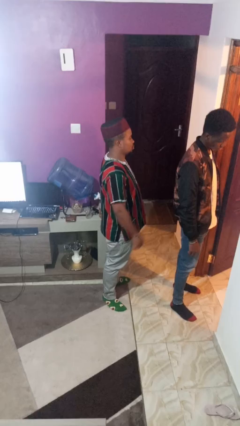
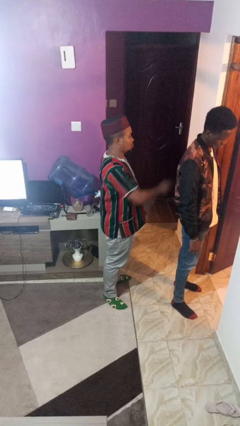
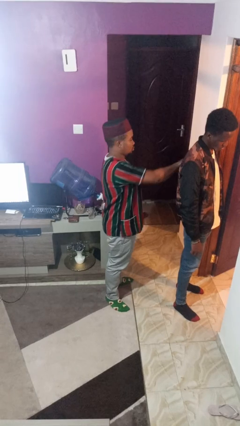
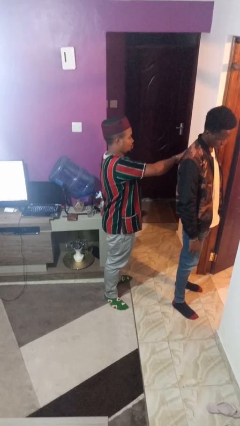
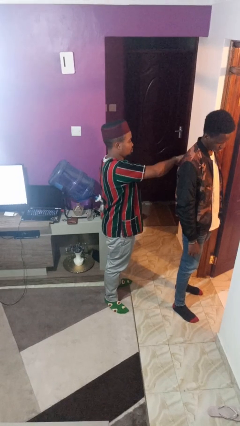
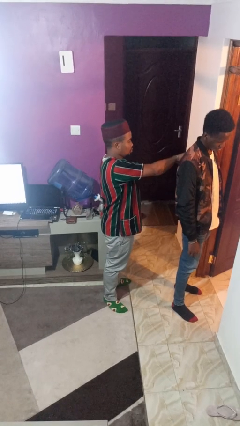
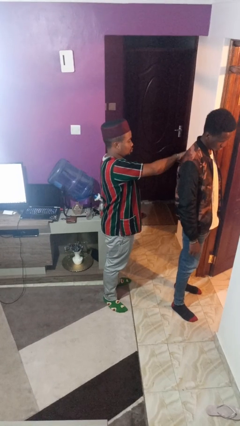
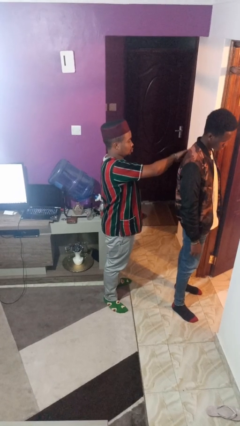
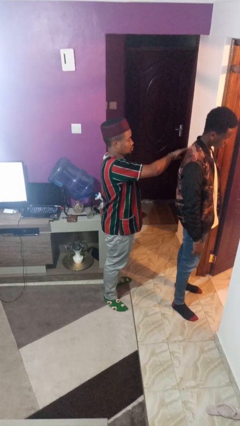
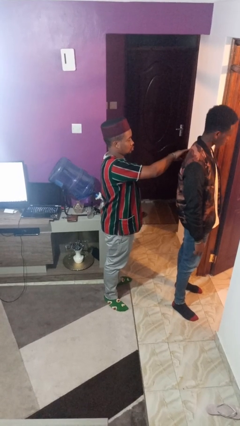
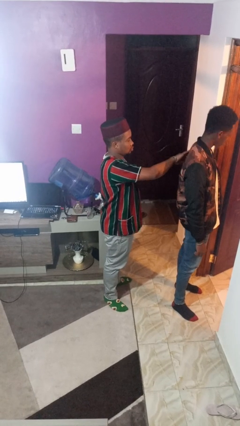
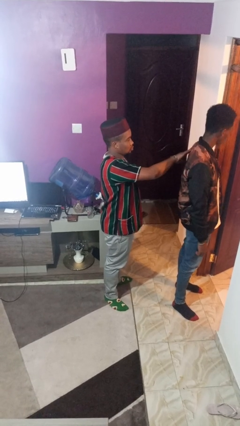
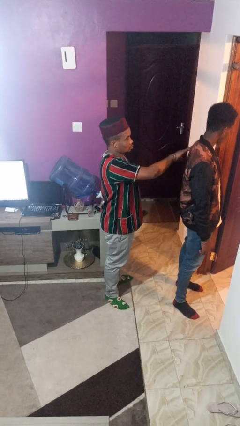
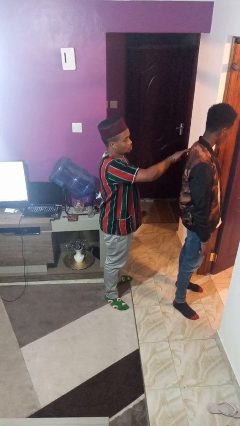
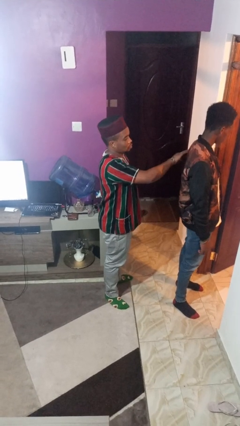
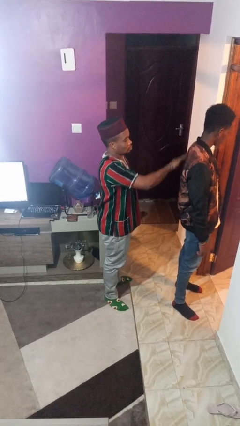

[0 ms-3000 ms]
person touches back of person

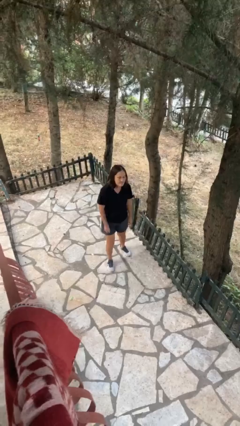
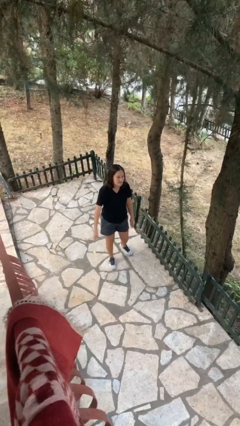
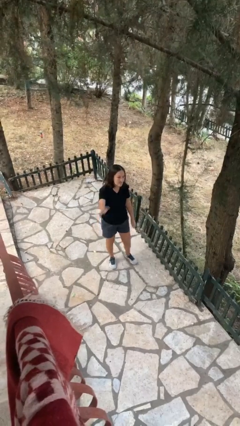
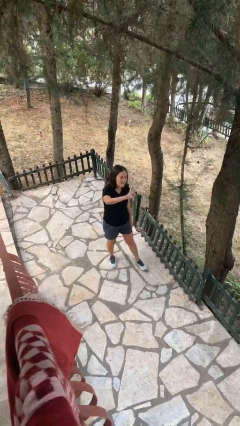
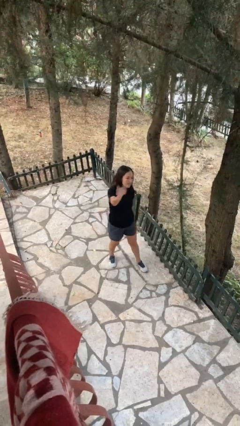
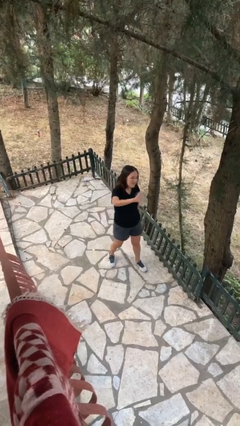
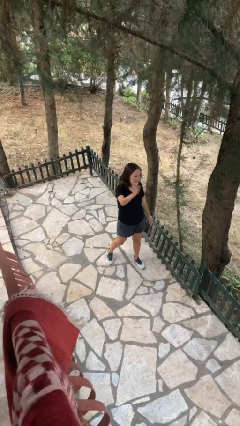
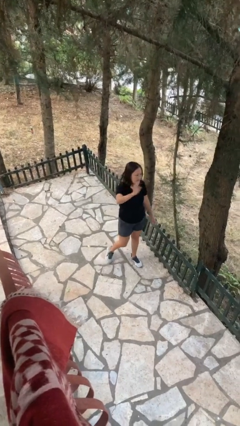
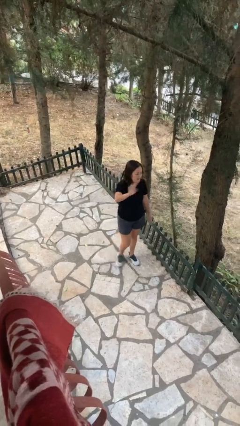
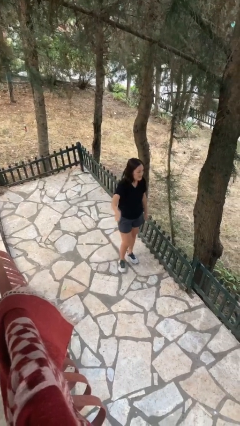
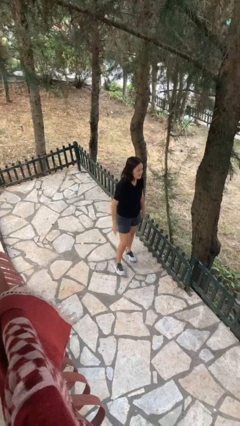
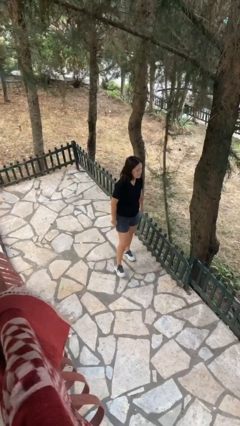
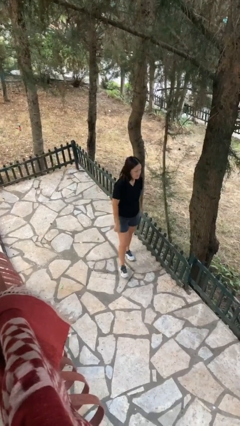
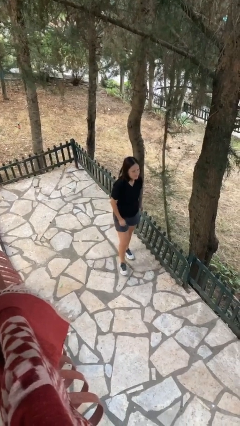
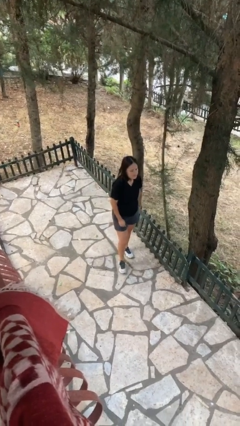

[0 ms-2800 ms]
person waves at person

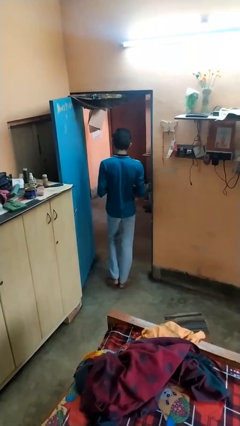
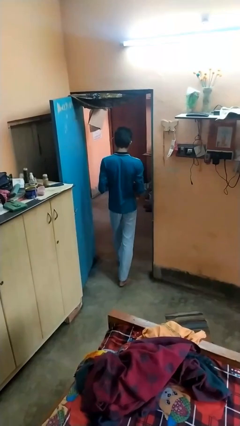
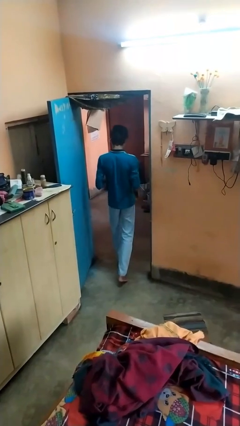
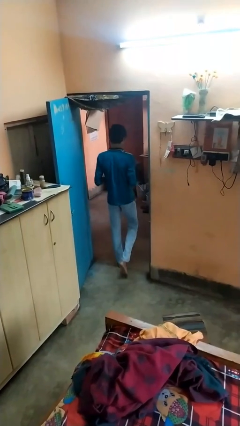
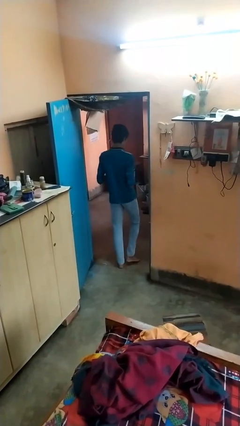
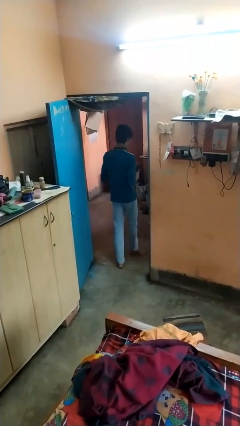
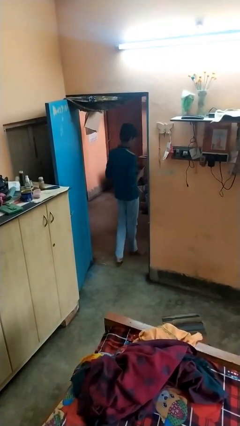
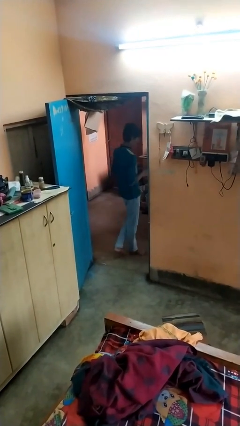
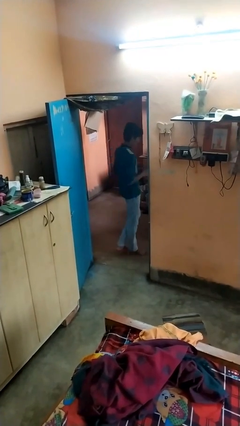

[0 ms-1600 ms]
person exits scene through structure

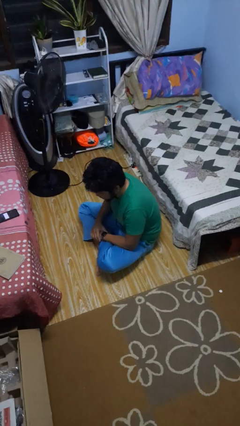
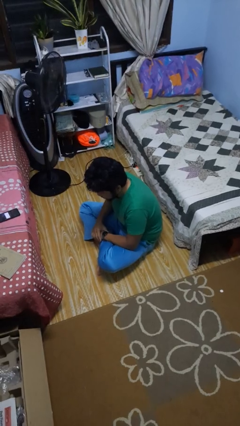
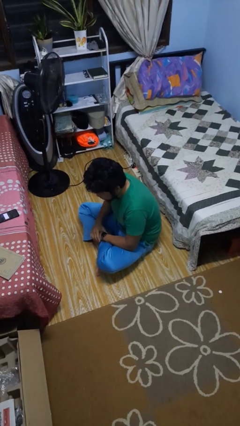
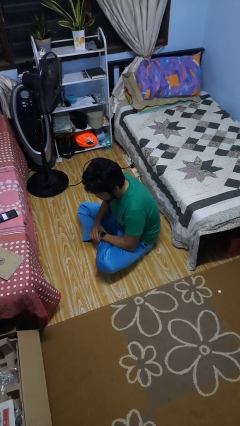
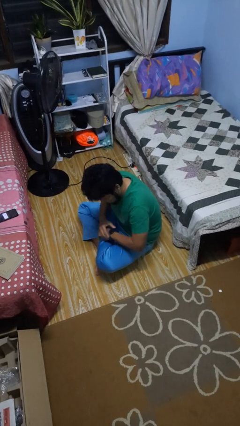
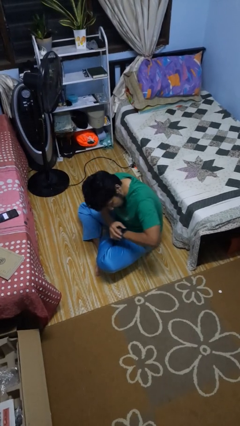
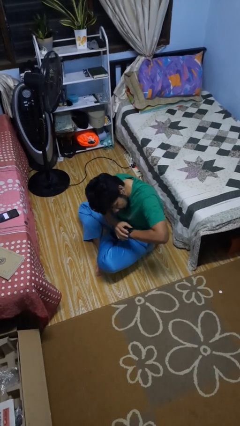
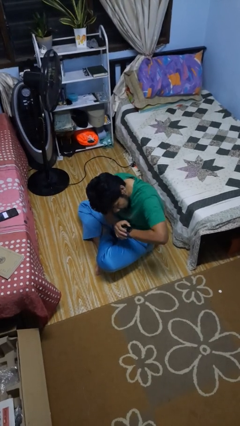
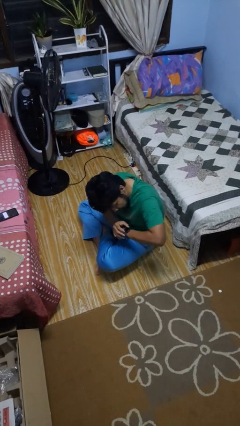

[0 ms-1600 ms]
person looks at wristwatch

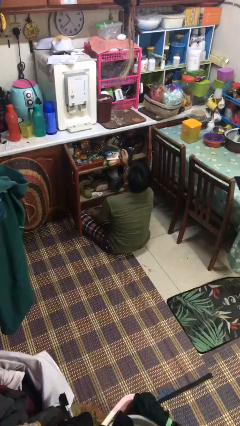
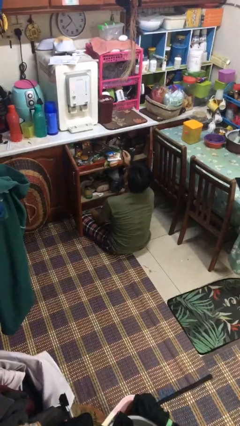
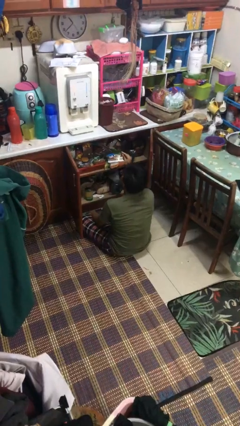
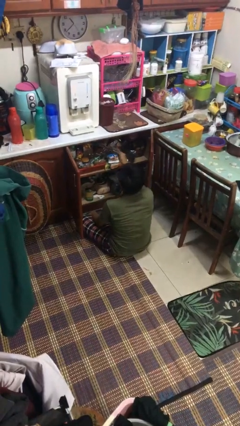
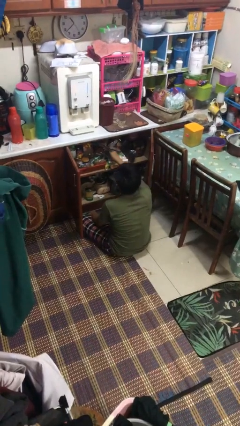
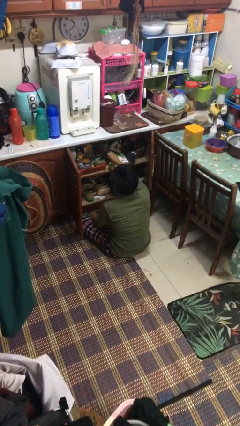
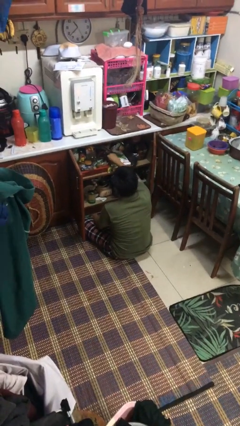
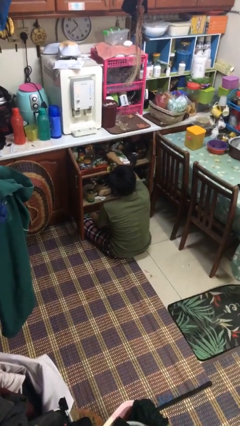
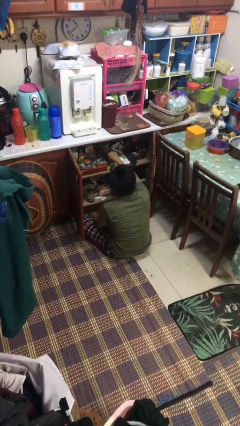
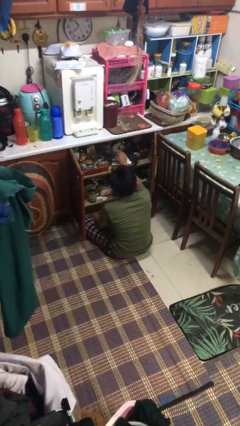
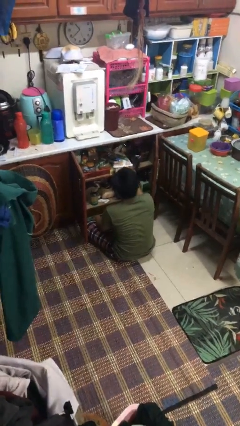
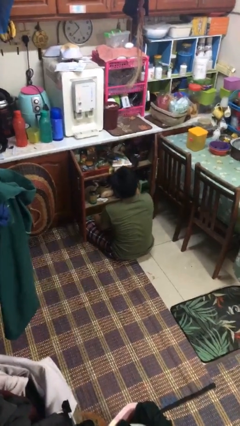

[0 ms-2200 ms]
person puts object into kitchen drawer

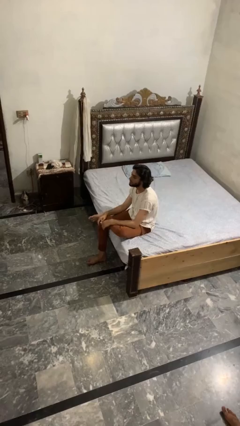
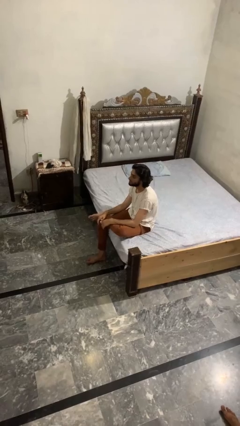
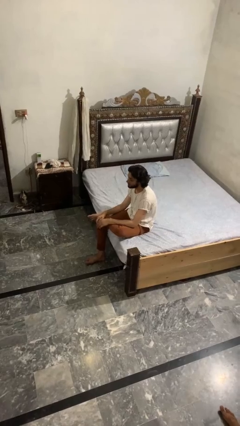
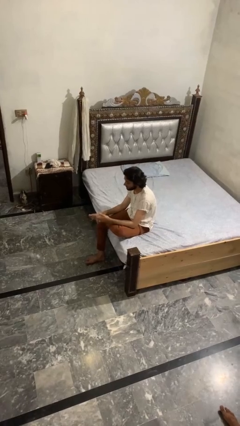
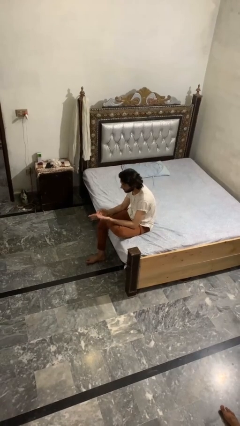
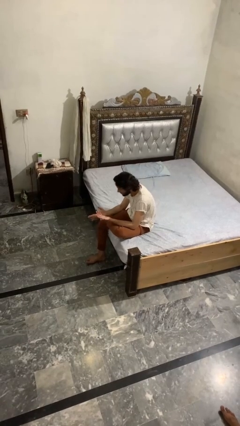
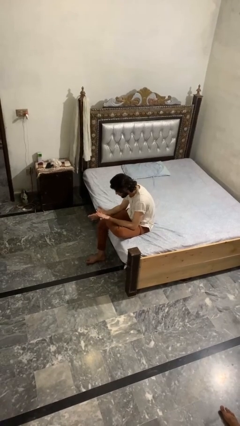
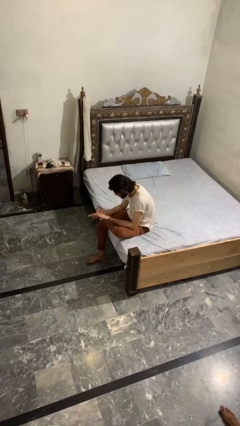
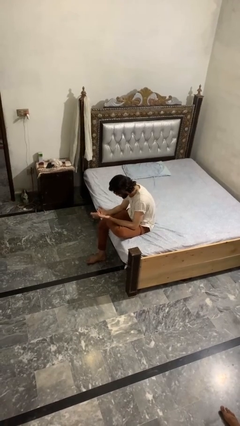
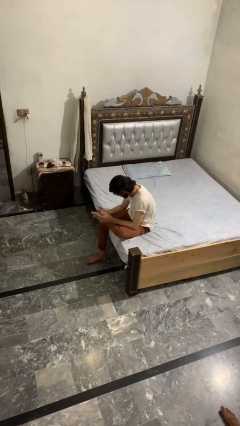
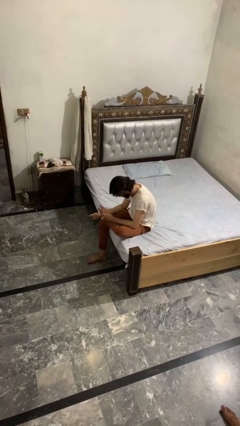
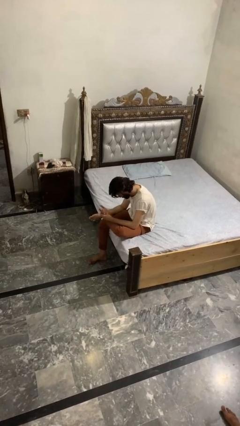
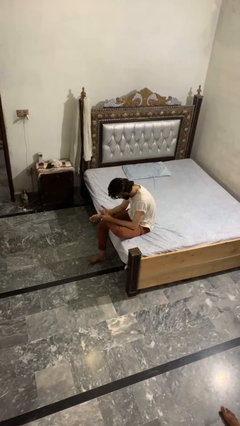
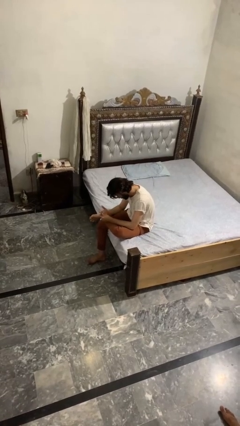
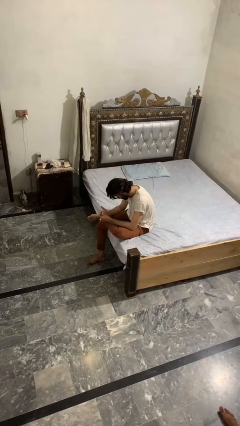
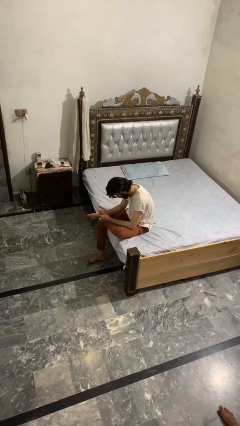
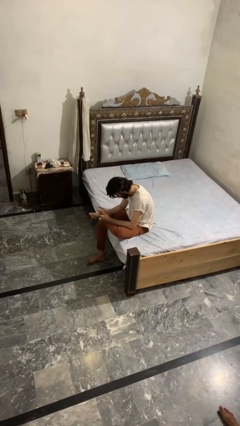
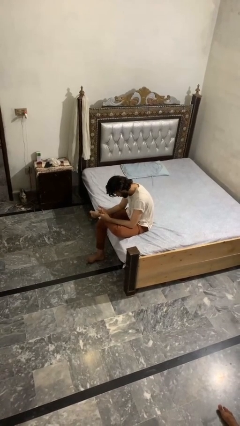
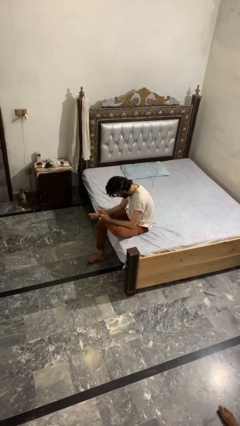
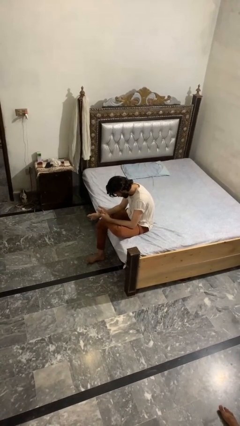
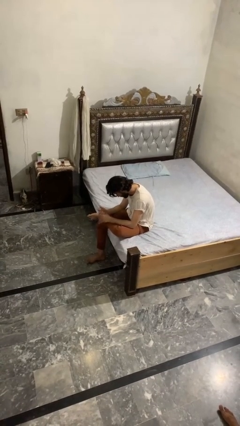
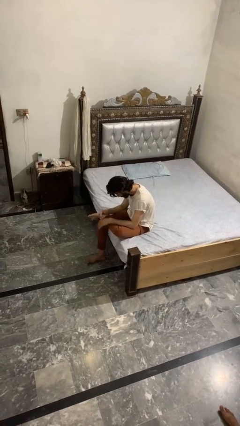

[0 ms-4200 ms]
person looks at hands in lap

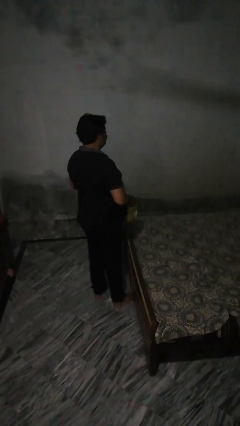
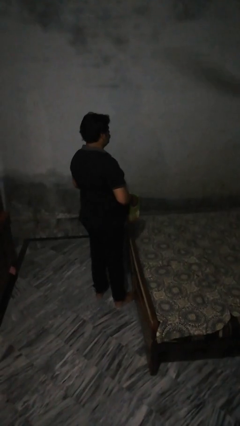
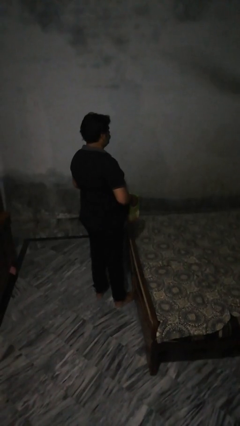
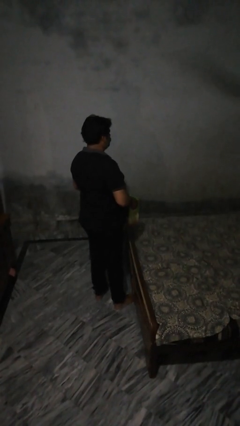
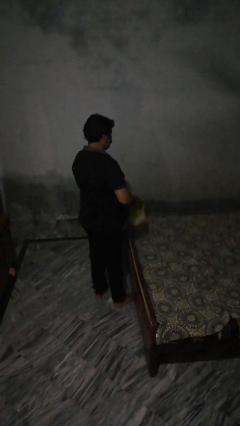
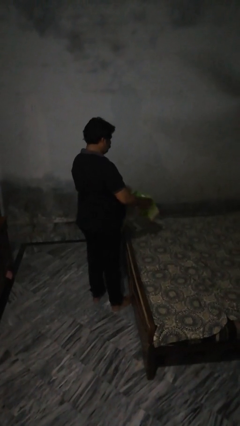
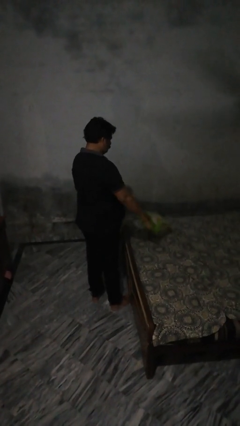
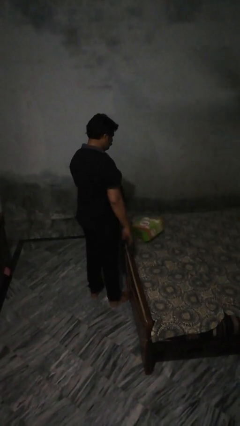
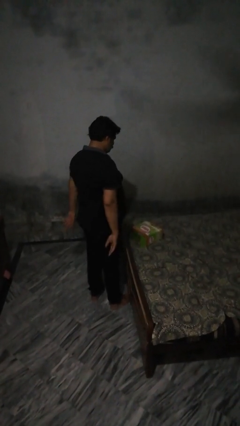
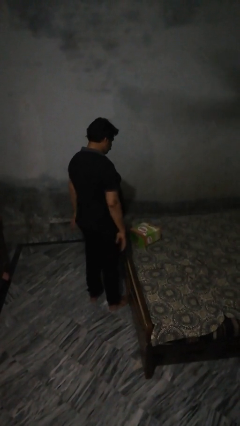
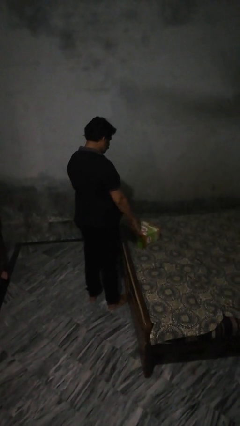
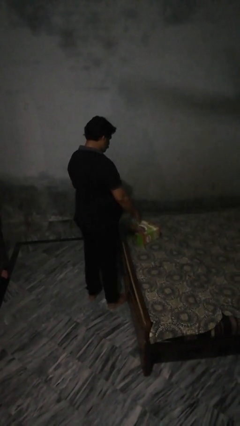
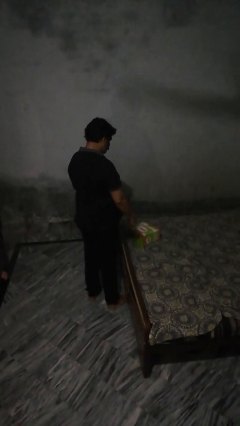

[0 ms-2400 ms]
person throws object on bed
